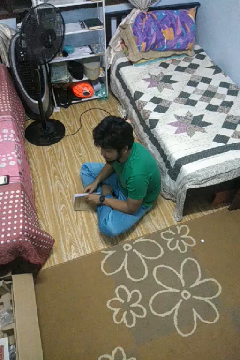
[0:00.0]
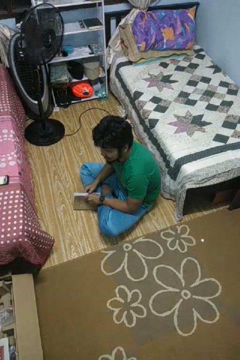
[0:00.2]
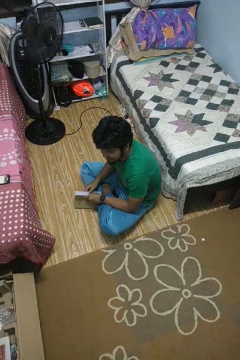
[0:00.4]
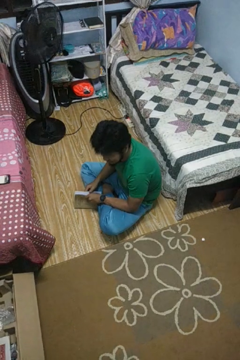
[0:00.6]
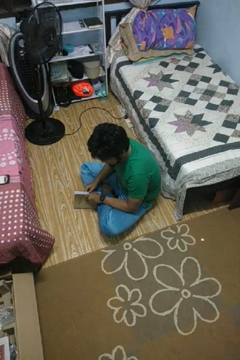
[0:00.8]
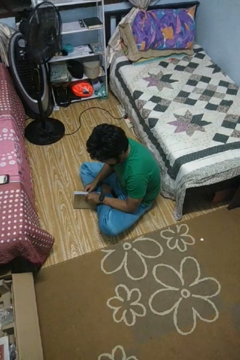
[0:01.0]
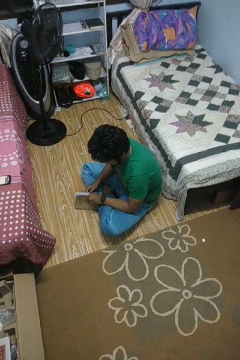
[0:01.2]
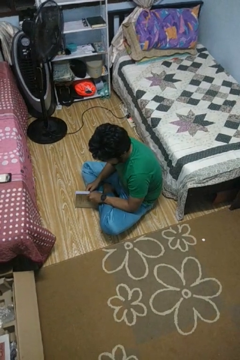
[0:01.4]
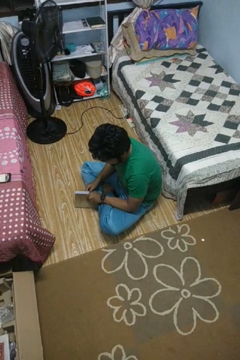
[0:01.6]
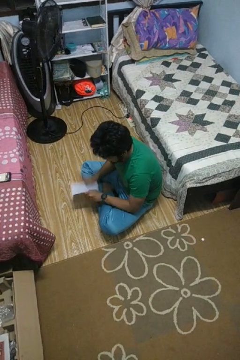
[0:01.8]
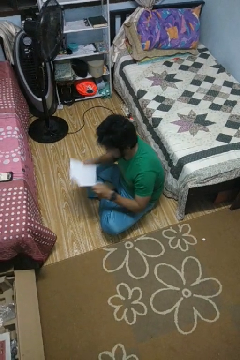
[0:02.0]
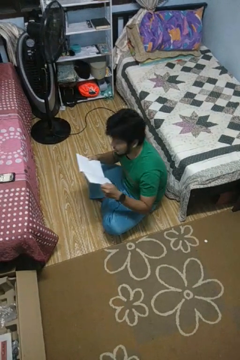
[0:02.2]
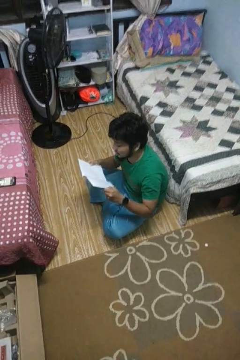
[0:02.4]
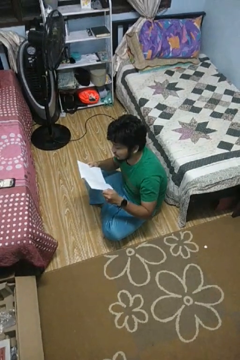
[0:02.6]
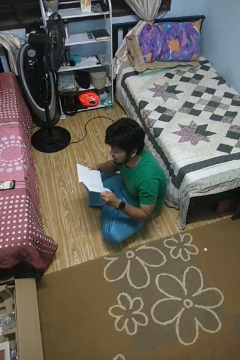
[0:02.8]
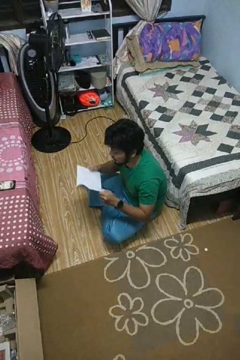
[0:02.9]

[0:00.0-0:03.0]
person reads book

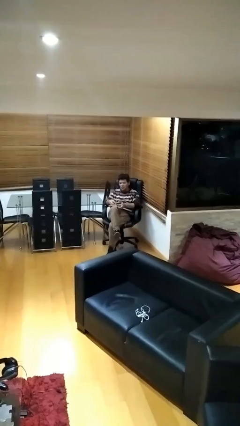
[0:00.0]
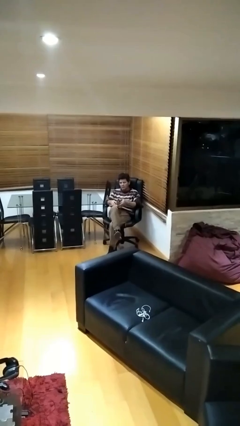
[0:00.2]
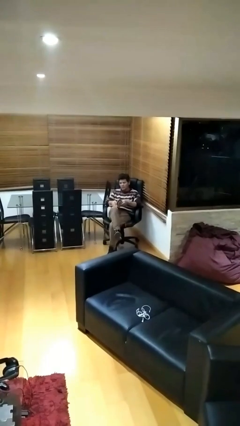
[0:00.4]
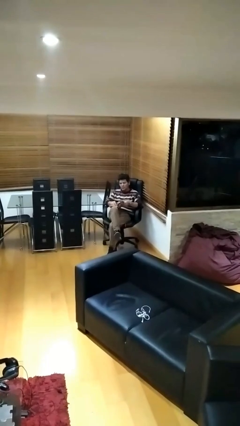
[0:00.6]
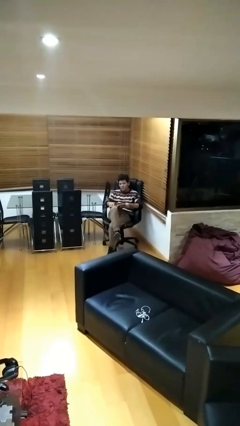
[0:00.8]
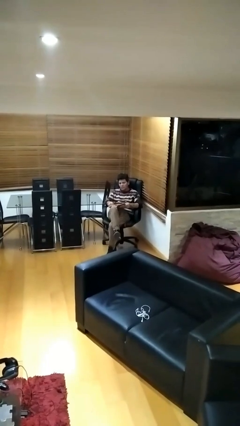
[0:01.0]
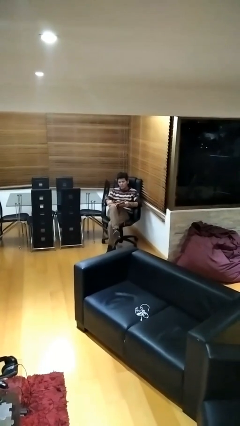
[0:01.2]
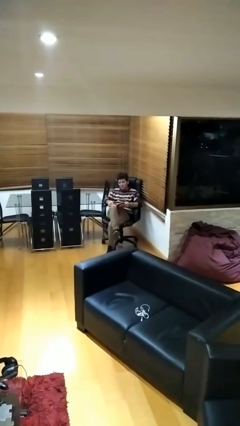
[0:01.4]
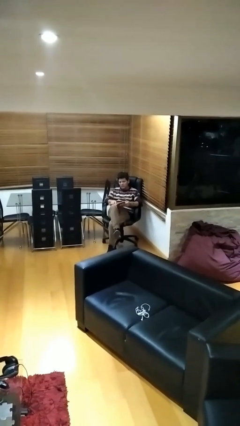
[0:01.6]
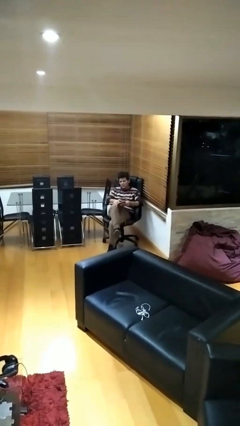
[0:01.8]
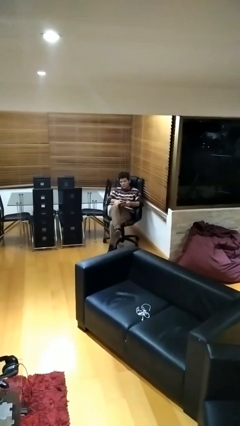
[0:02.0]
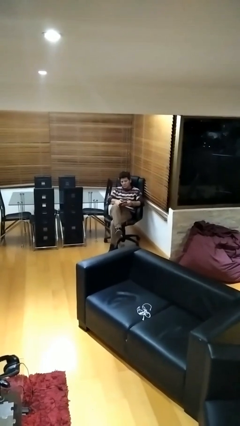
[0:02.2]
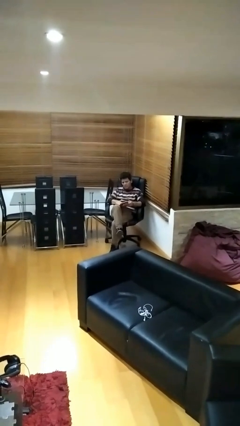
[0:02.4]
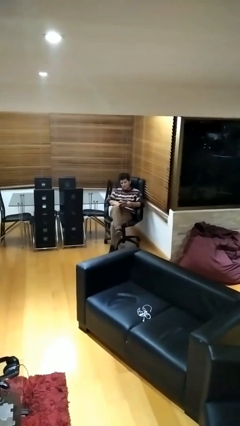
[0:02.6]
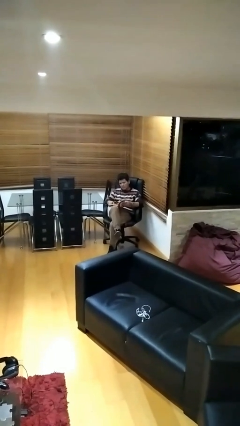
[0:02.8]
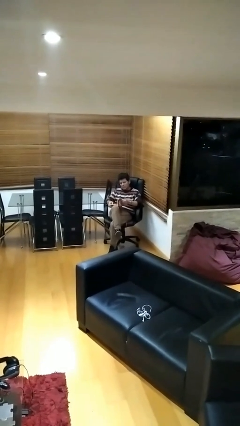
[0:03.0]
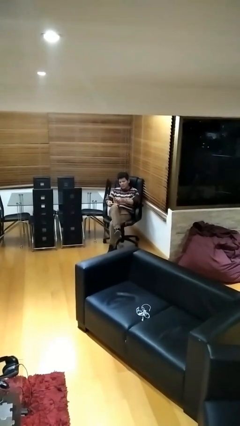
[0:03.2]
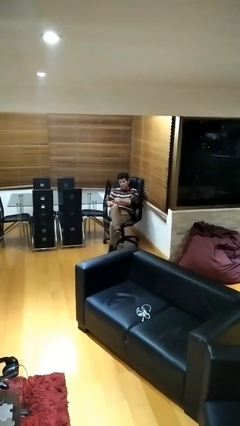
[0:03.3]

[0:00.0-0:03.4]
person reads document

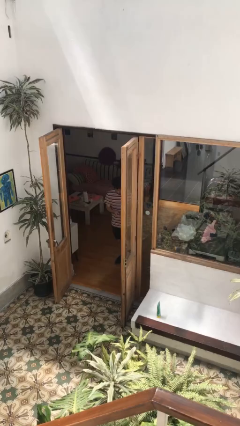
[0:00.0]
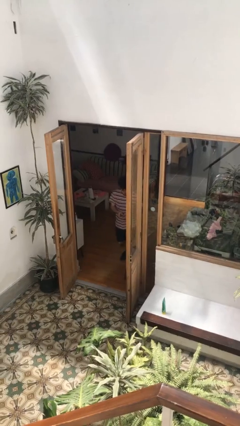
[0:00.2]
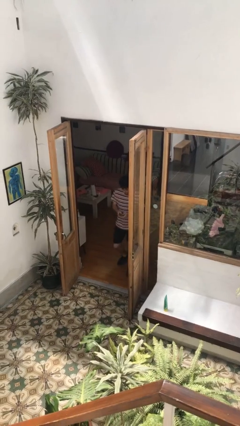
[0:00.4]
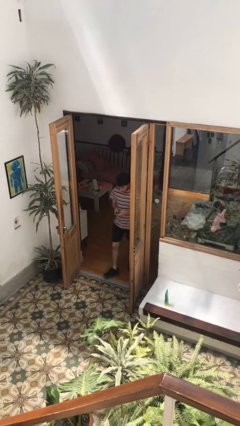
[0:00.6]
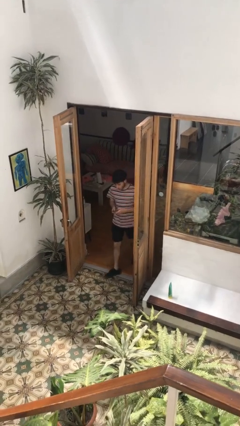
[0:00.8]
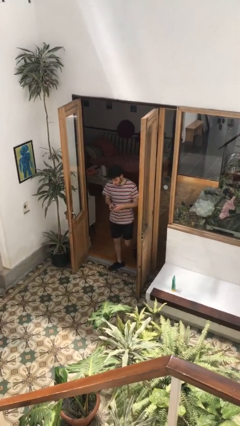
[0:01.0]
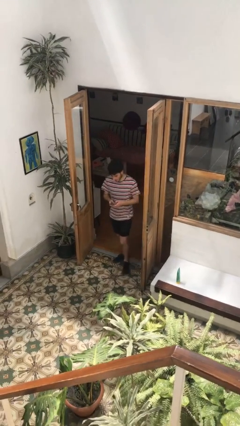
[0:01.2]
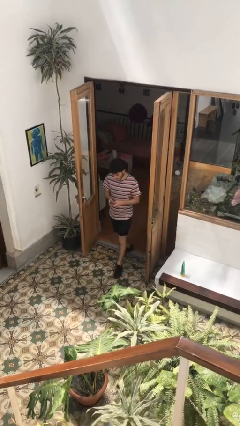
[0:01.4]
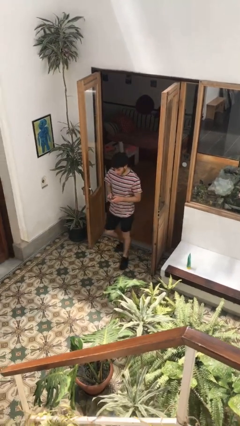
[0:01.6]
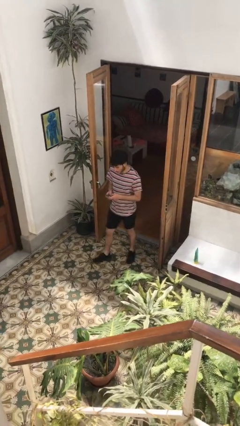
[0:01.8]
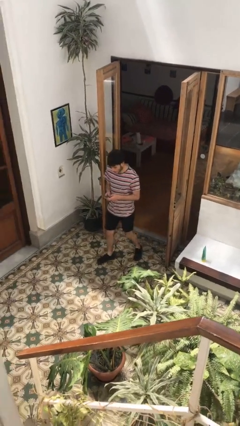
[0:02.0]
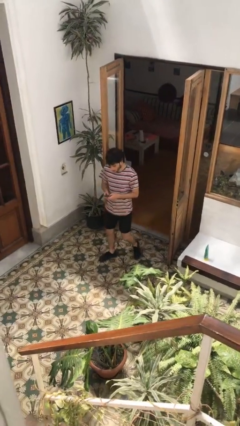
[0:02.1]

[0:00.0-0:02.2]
person enters scene through structure

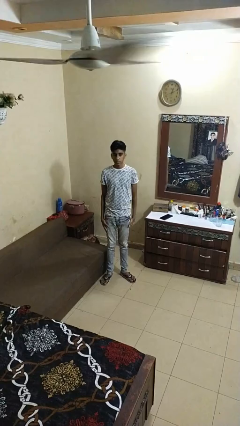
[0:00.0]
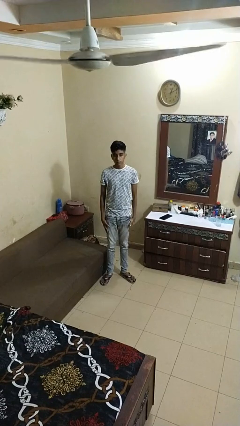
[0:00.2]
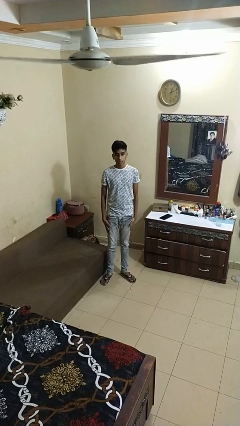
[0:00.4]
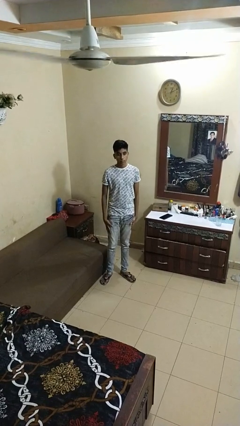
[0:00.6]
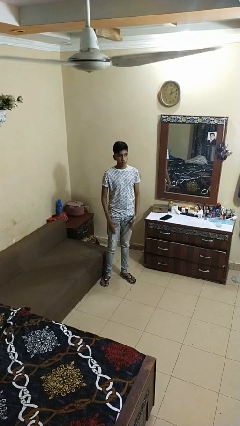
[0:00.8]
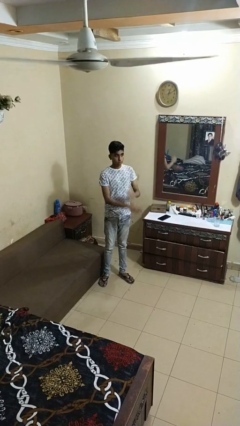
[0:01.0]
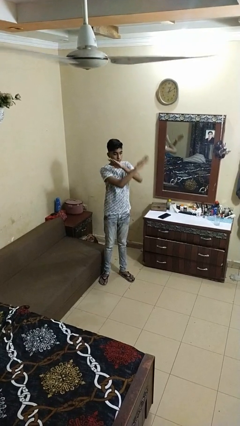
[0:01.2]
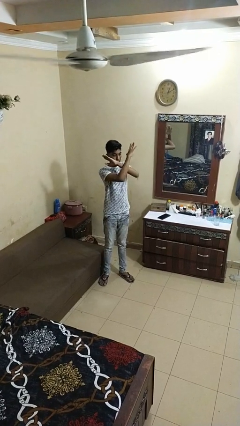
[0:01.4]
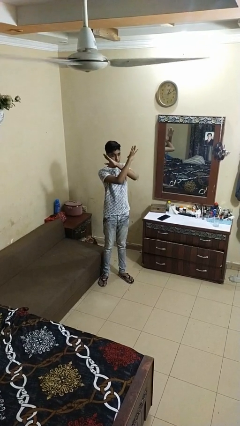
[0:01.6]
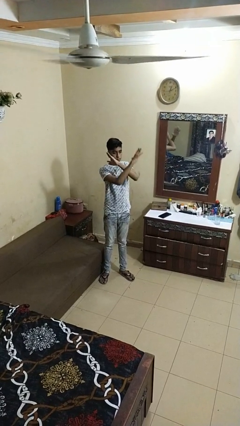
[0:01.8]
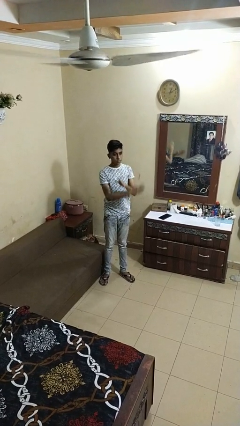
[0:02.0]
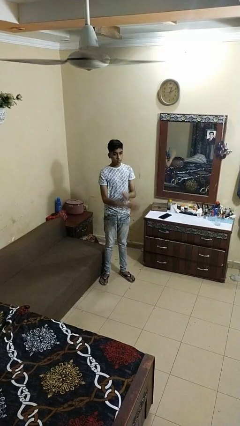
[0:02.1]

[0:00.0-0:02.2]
person gestures arms x

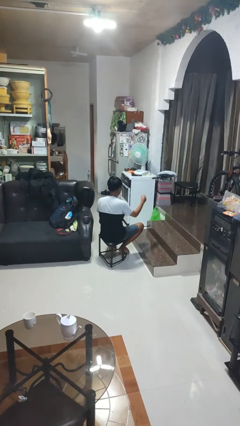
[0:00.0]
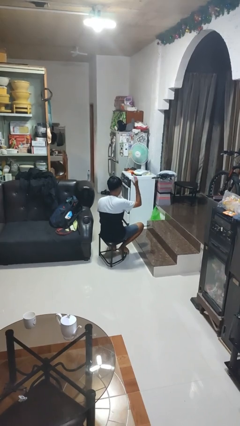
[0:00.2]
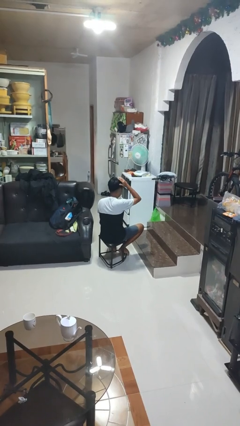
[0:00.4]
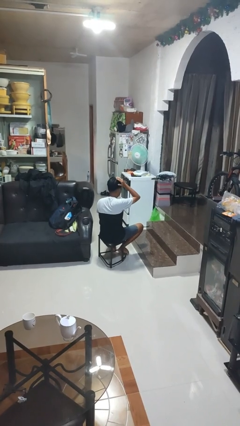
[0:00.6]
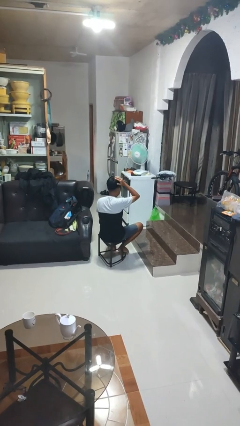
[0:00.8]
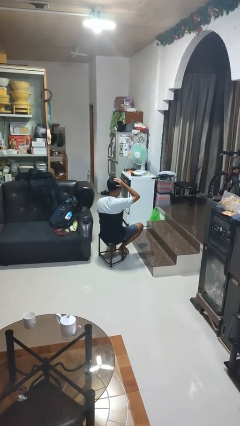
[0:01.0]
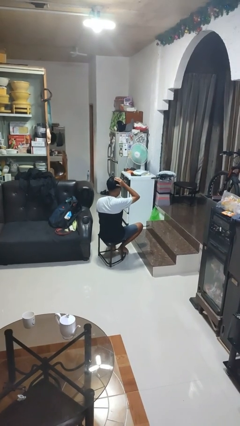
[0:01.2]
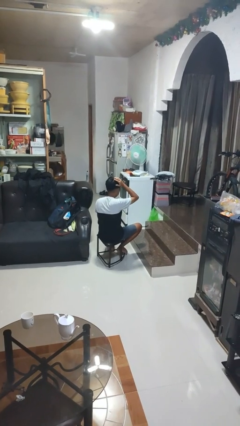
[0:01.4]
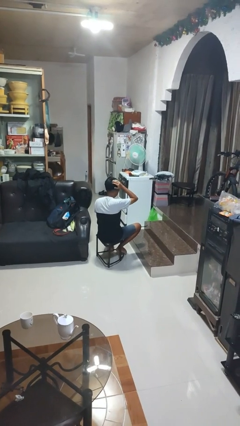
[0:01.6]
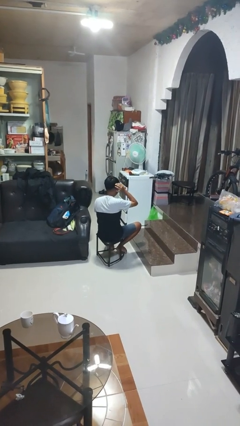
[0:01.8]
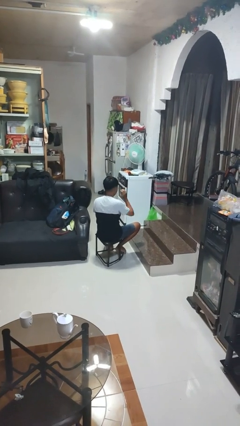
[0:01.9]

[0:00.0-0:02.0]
person pats head

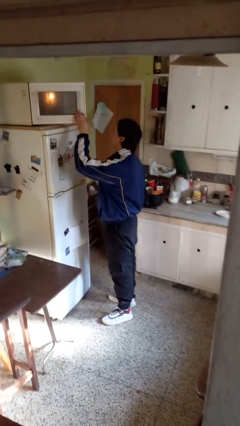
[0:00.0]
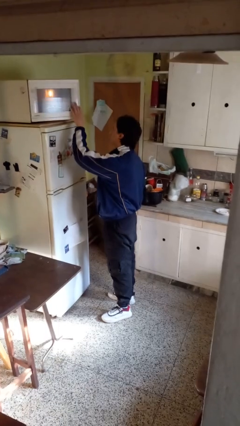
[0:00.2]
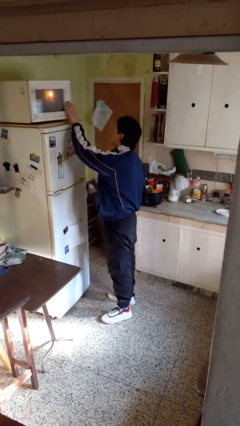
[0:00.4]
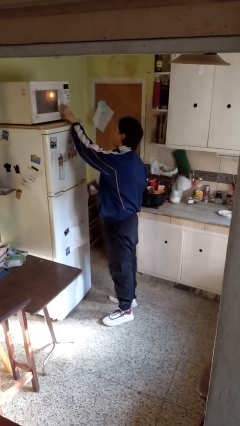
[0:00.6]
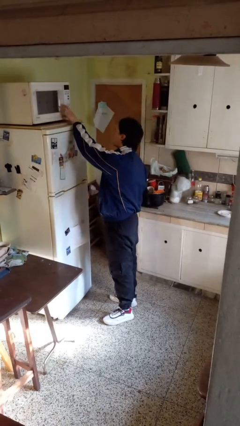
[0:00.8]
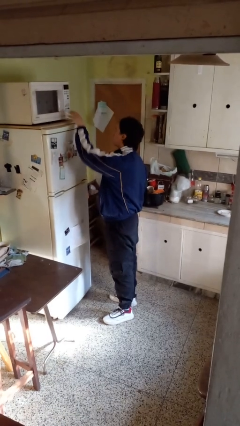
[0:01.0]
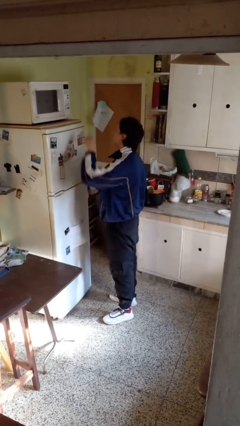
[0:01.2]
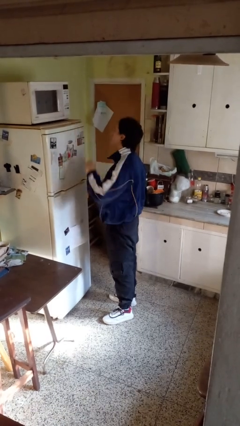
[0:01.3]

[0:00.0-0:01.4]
person closes microwave

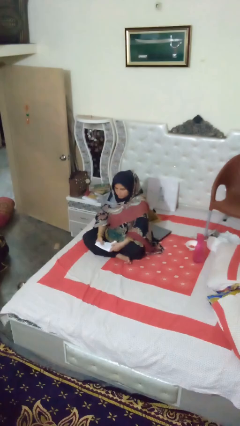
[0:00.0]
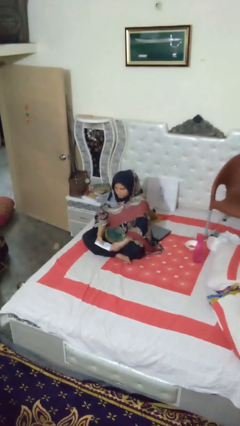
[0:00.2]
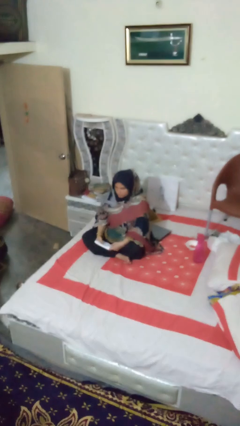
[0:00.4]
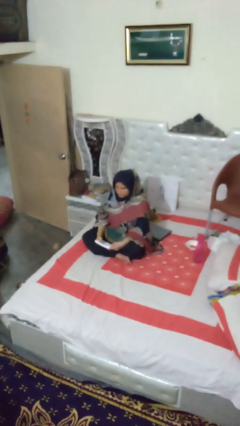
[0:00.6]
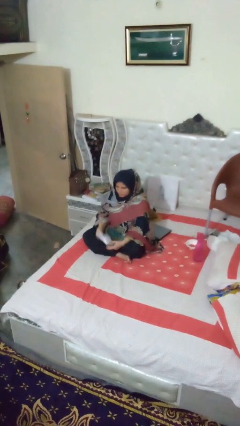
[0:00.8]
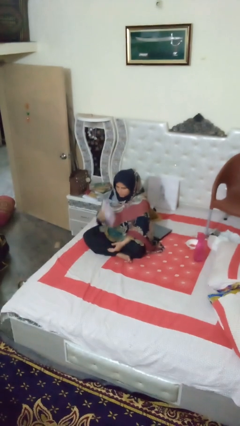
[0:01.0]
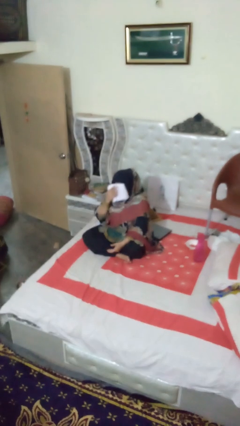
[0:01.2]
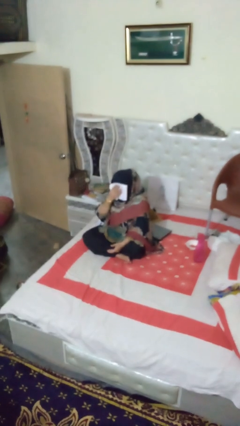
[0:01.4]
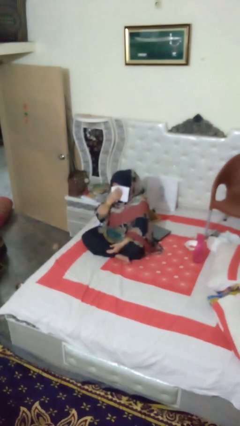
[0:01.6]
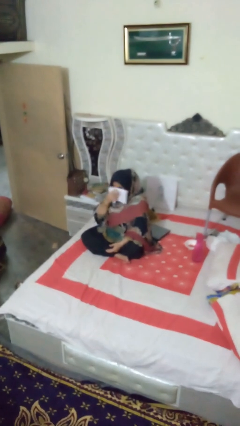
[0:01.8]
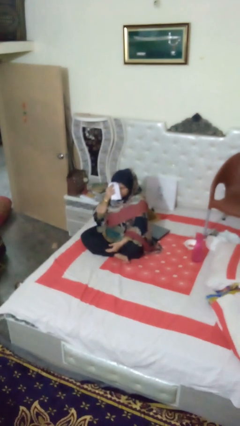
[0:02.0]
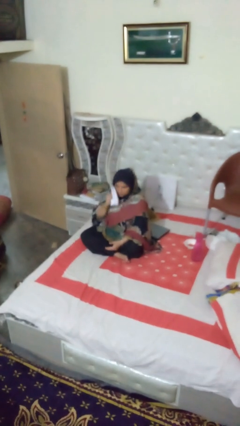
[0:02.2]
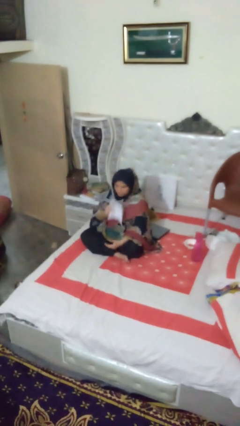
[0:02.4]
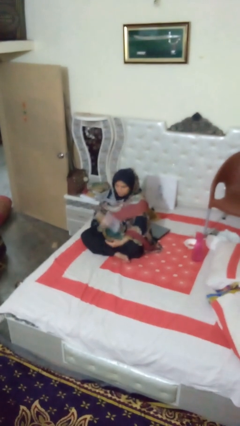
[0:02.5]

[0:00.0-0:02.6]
person wipes mouth with napkin

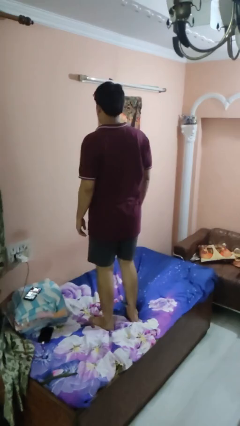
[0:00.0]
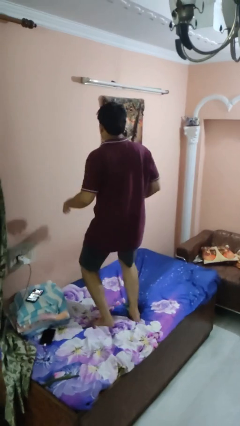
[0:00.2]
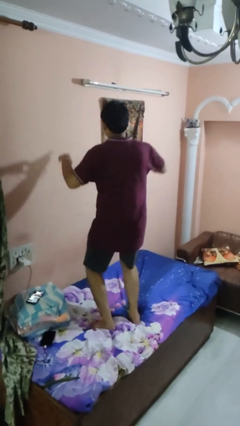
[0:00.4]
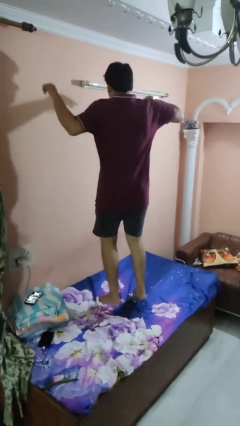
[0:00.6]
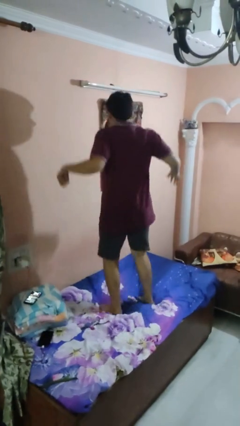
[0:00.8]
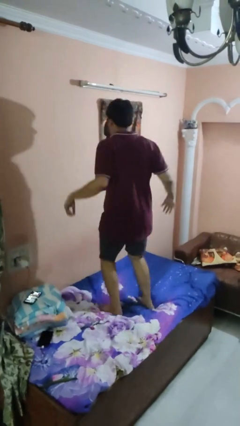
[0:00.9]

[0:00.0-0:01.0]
person jumps on bed
